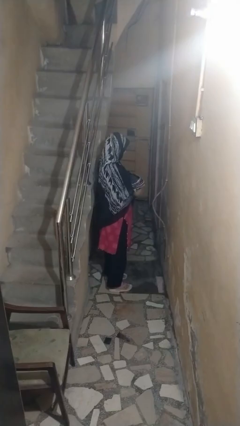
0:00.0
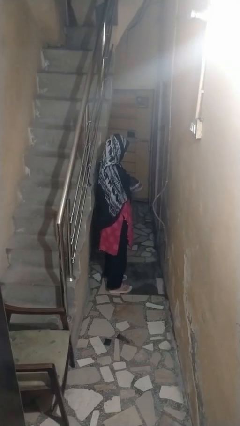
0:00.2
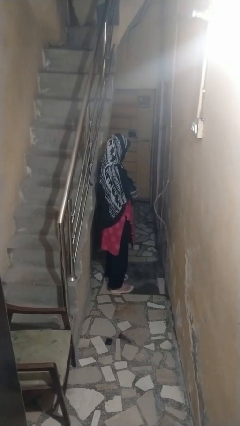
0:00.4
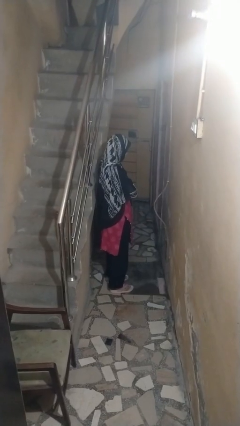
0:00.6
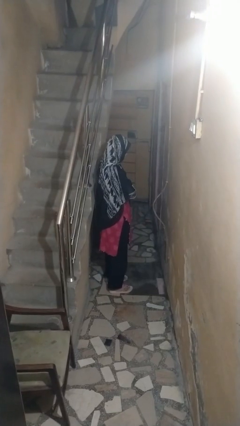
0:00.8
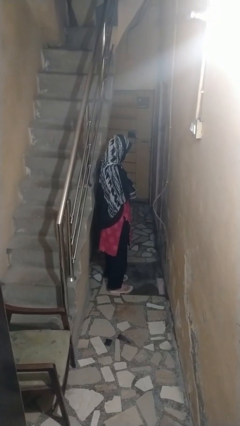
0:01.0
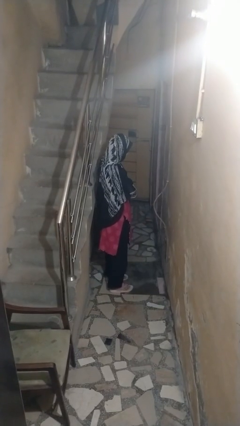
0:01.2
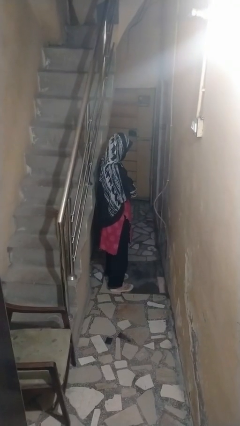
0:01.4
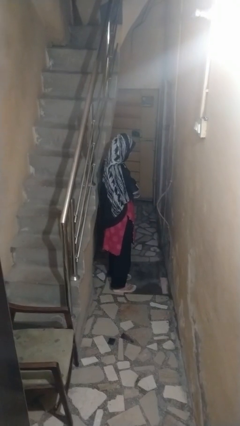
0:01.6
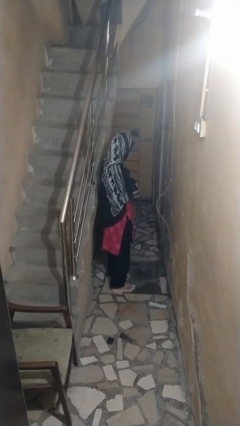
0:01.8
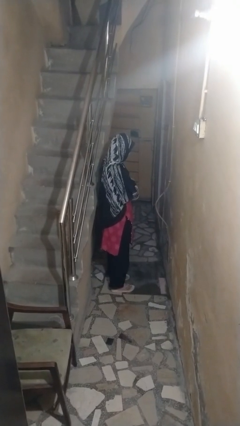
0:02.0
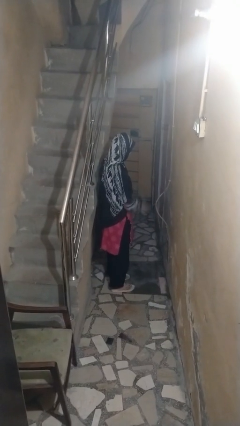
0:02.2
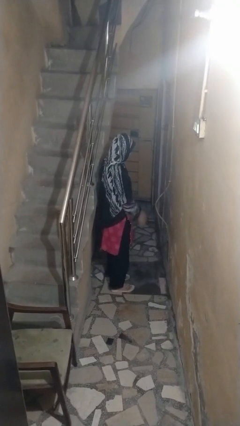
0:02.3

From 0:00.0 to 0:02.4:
person crosses arms

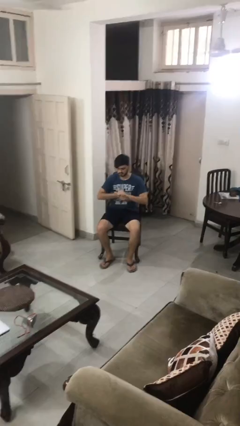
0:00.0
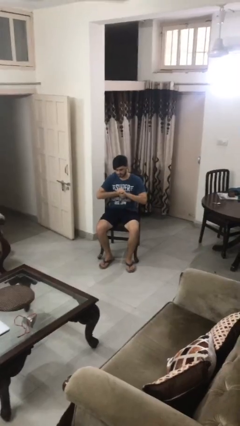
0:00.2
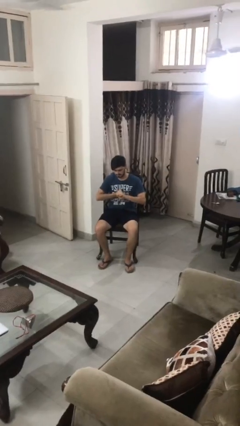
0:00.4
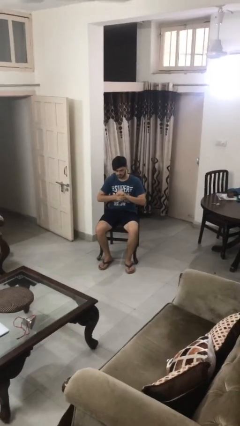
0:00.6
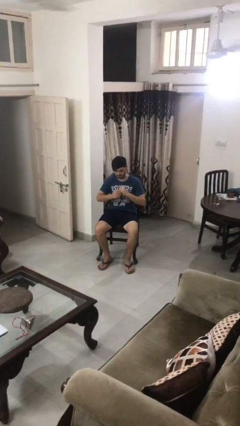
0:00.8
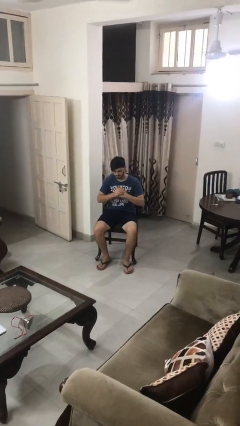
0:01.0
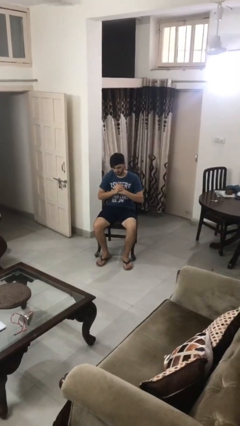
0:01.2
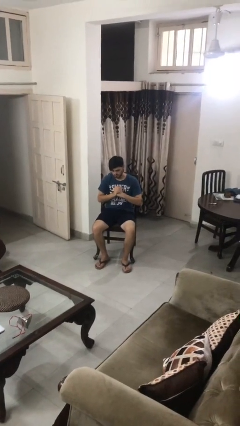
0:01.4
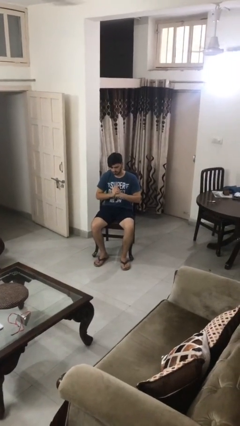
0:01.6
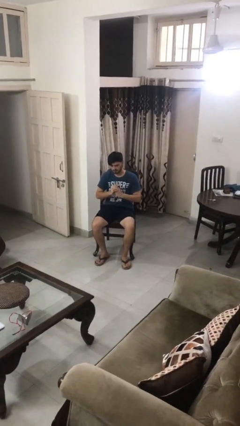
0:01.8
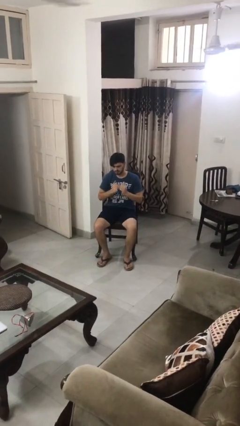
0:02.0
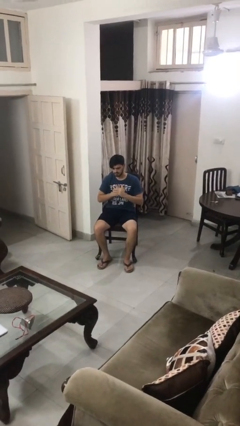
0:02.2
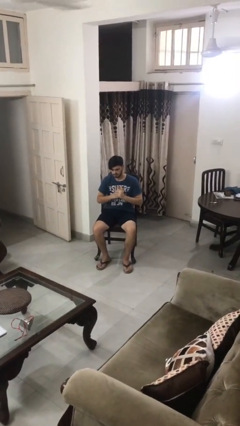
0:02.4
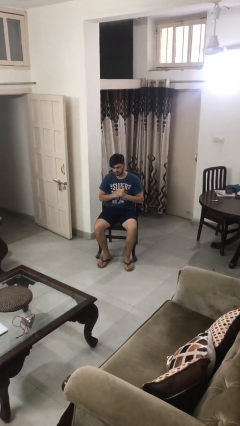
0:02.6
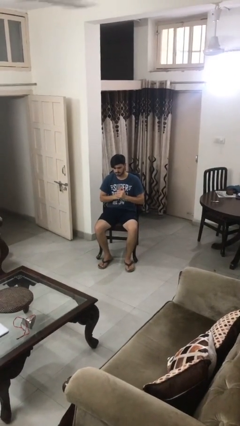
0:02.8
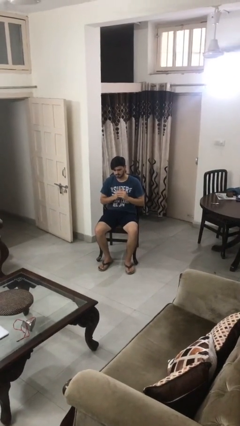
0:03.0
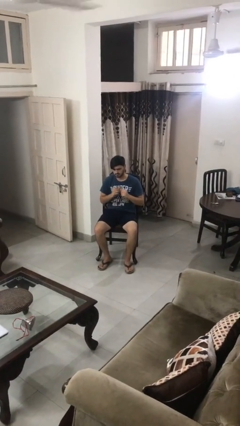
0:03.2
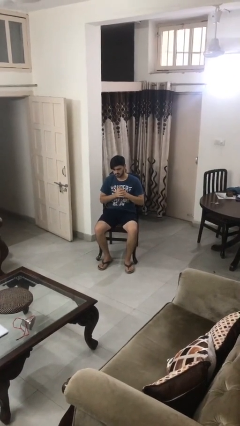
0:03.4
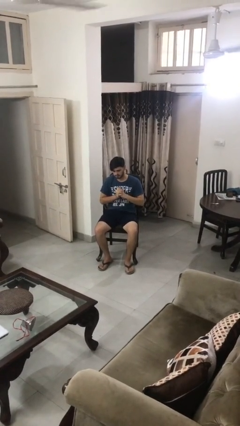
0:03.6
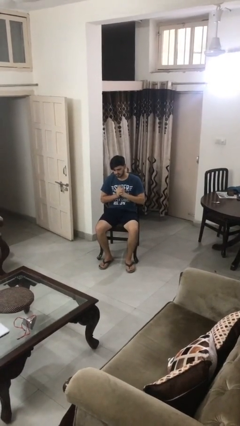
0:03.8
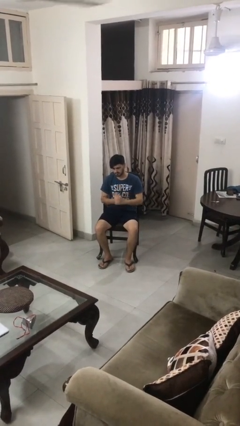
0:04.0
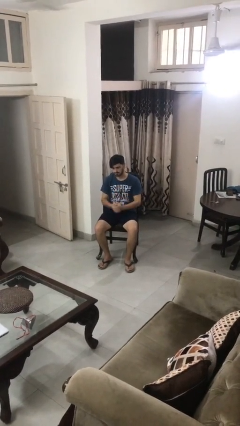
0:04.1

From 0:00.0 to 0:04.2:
person cracks knuckles

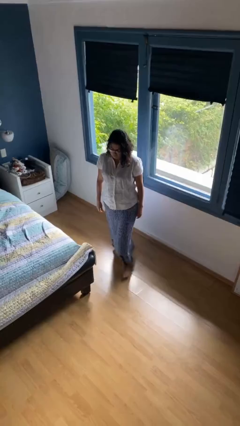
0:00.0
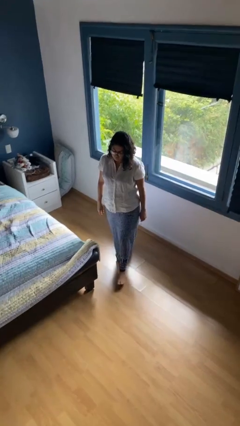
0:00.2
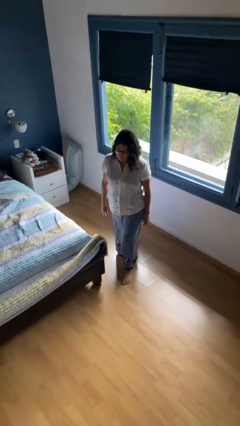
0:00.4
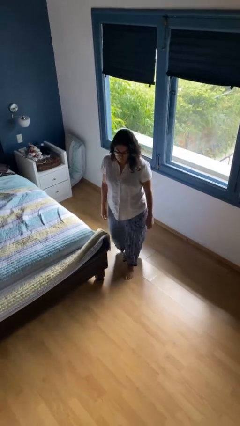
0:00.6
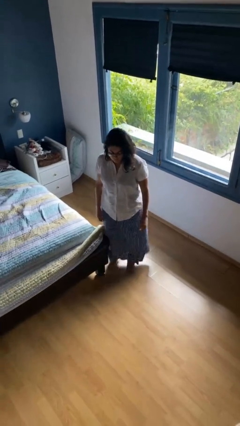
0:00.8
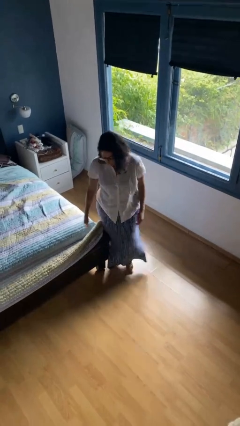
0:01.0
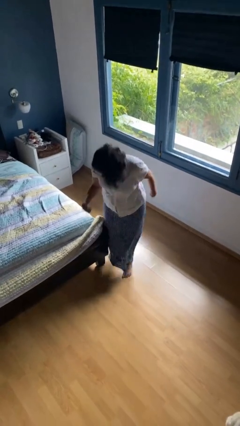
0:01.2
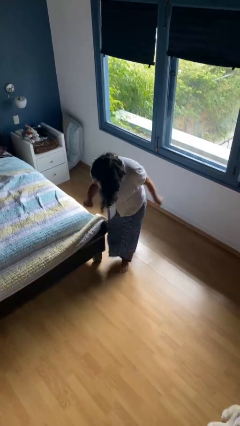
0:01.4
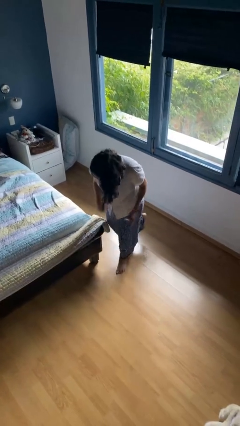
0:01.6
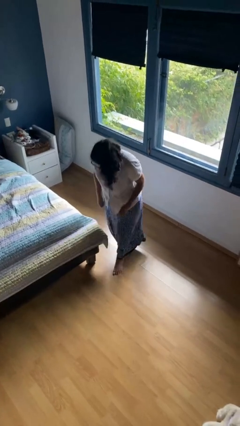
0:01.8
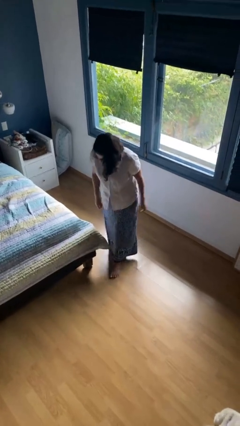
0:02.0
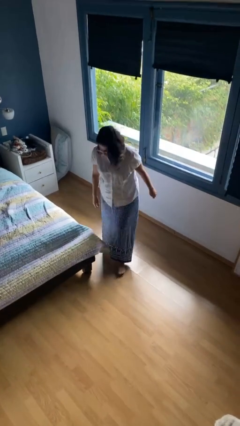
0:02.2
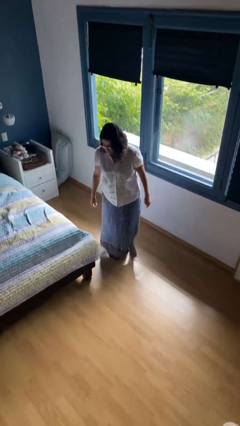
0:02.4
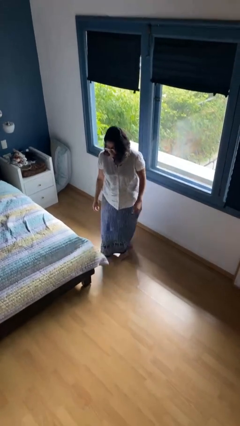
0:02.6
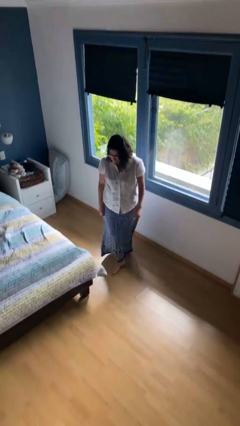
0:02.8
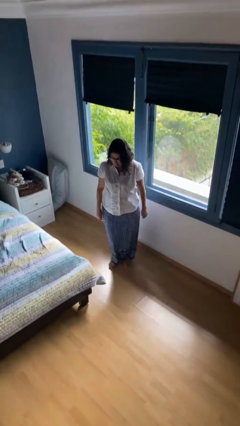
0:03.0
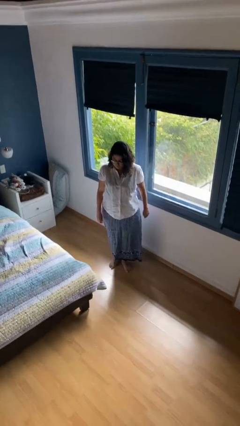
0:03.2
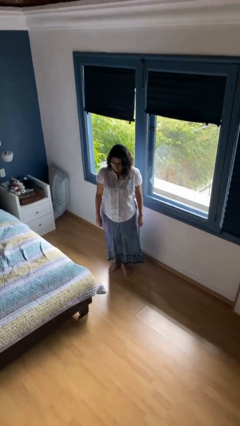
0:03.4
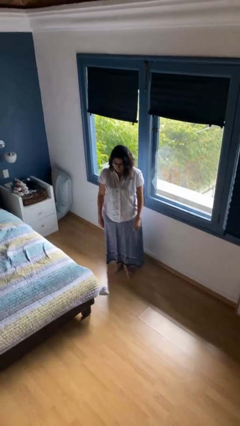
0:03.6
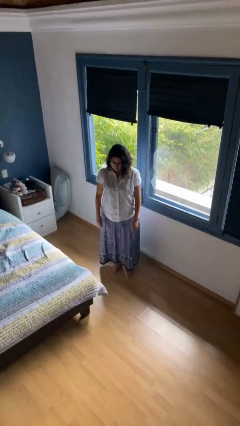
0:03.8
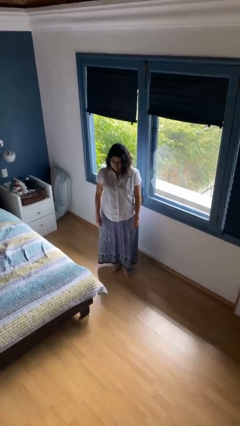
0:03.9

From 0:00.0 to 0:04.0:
person stubs toe

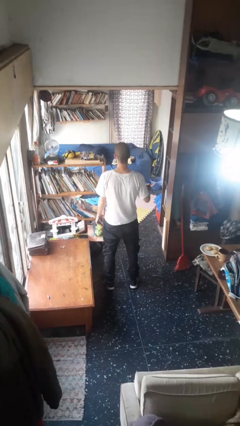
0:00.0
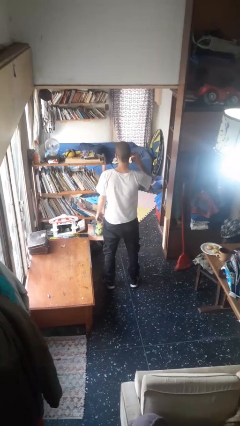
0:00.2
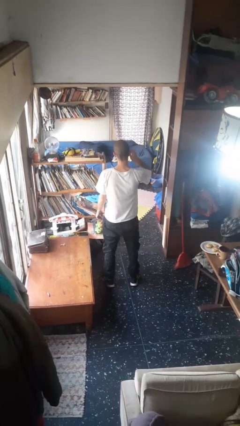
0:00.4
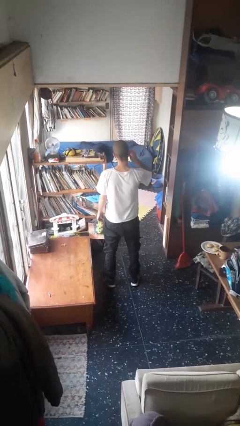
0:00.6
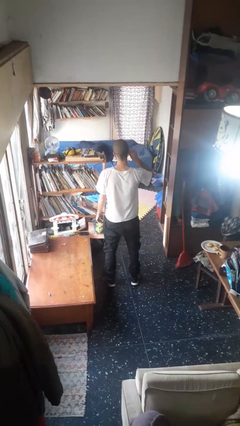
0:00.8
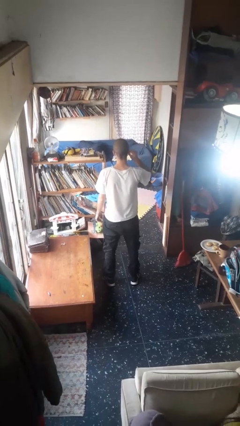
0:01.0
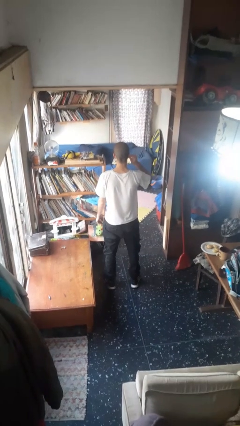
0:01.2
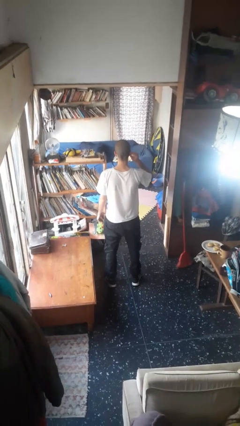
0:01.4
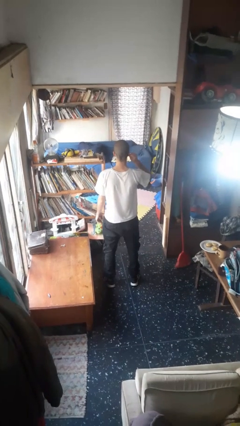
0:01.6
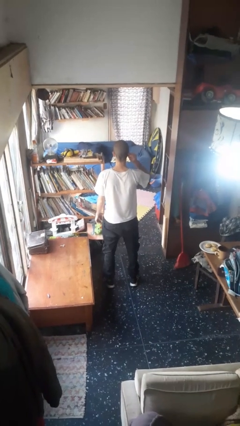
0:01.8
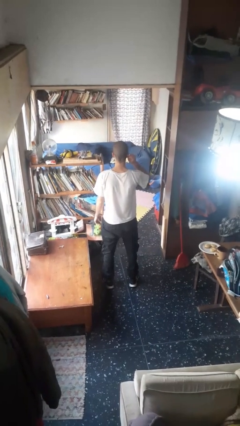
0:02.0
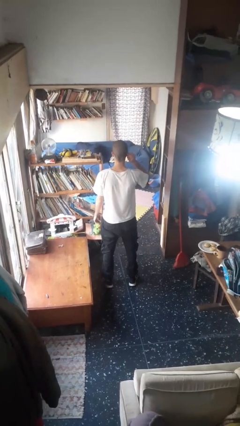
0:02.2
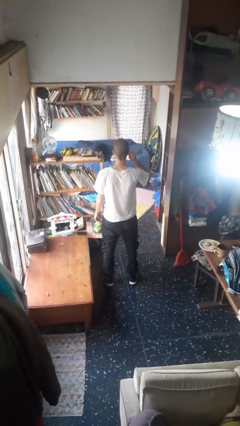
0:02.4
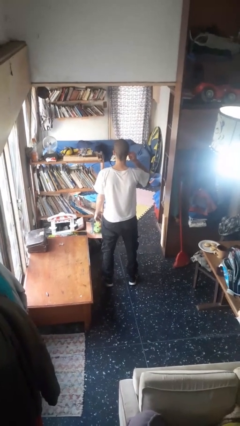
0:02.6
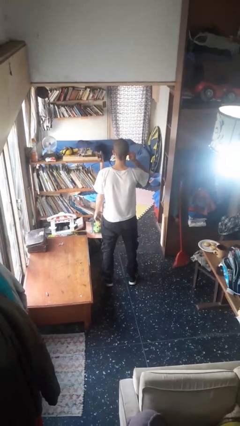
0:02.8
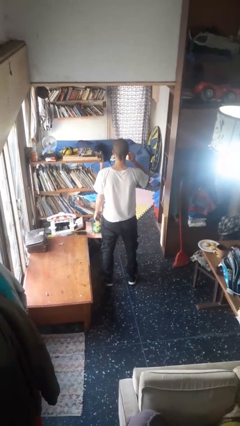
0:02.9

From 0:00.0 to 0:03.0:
person touches earlobe

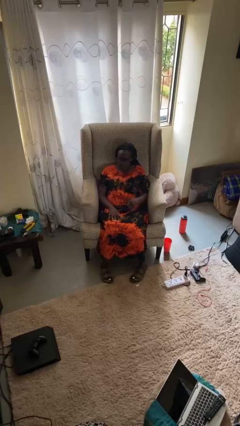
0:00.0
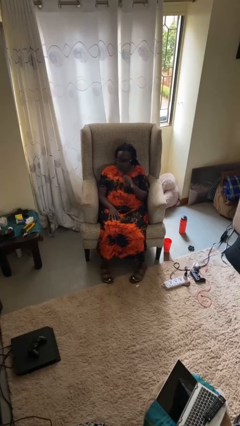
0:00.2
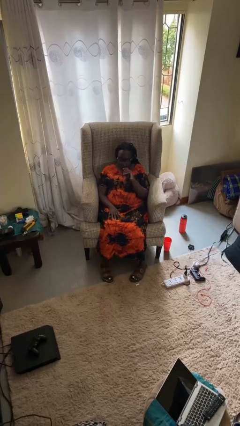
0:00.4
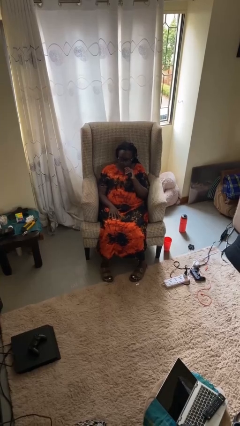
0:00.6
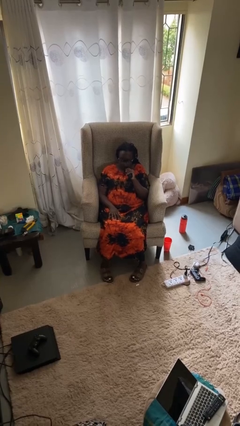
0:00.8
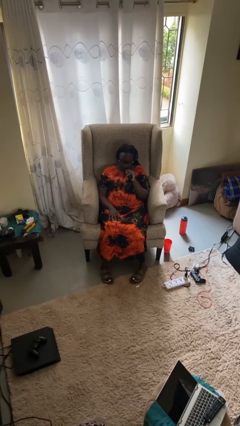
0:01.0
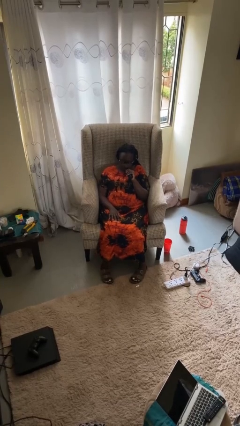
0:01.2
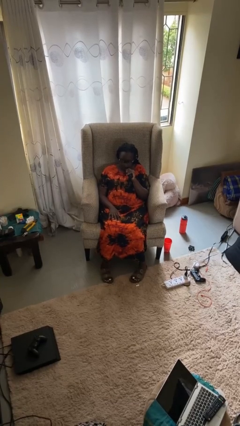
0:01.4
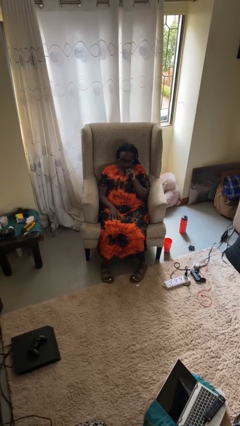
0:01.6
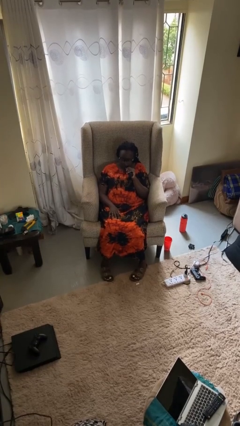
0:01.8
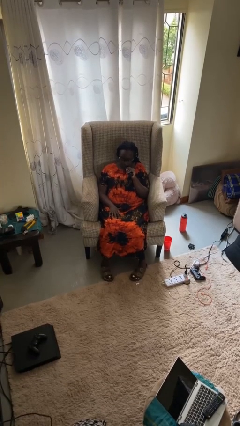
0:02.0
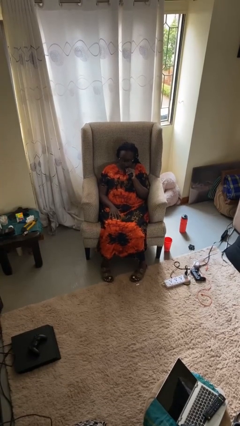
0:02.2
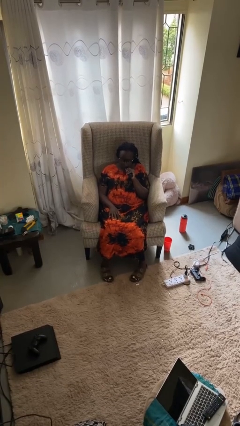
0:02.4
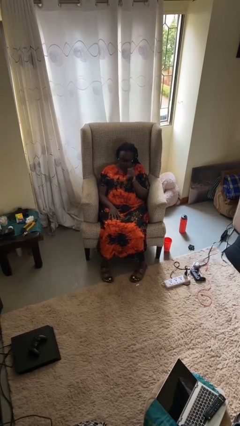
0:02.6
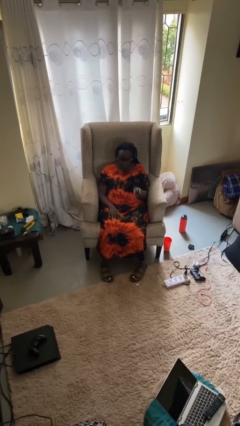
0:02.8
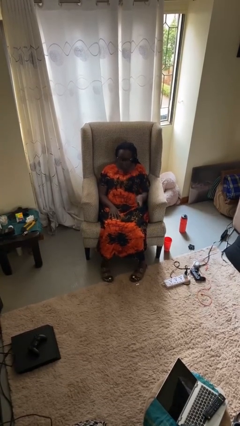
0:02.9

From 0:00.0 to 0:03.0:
person vapes

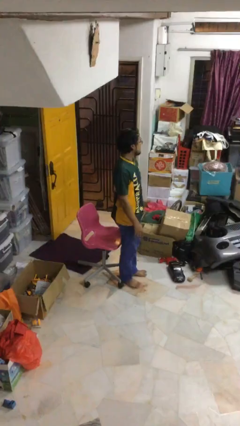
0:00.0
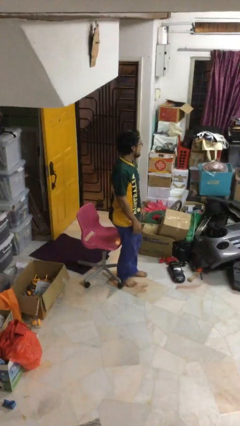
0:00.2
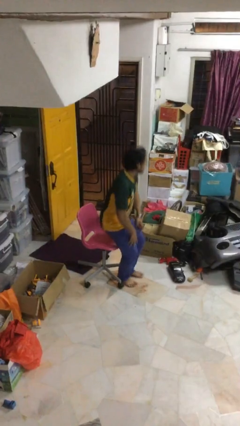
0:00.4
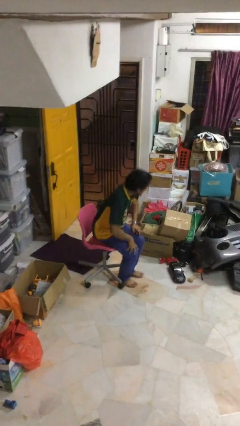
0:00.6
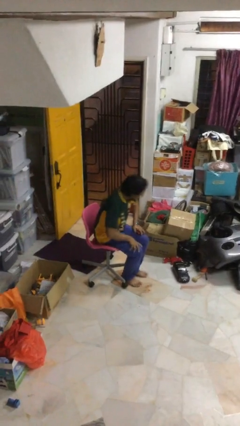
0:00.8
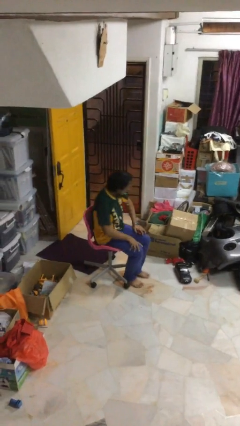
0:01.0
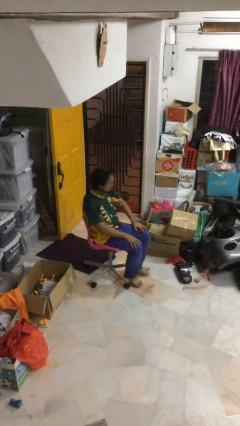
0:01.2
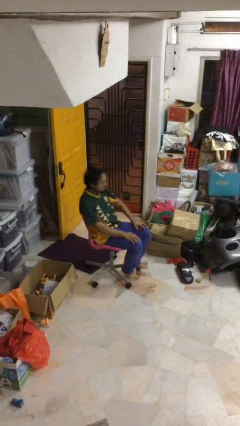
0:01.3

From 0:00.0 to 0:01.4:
person sits down
